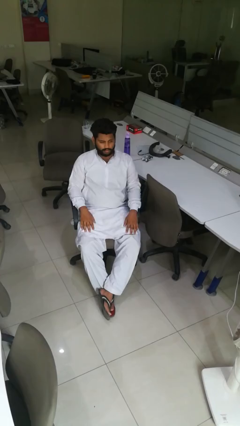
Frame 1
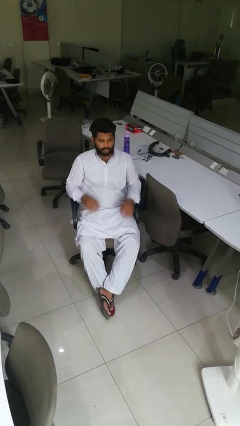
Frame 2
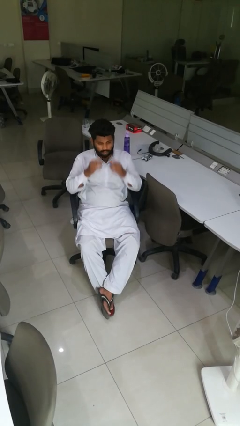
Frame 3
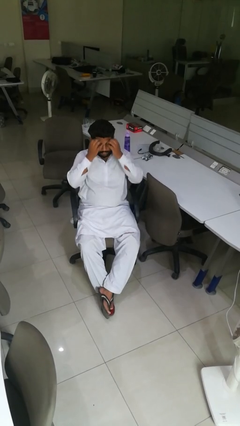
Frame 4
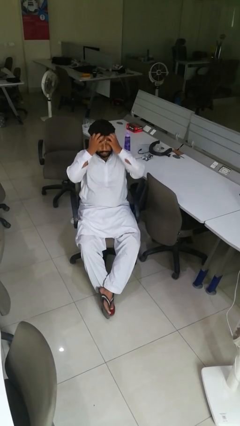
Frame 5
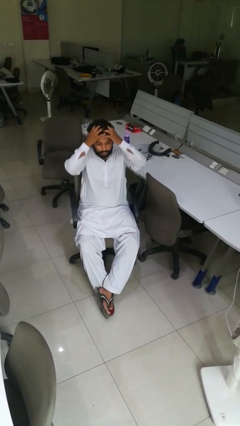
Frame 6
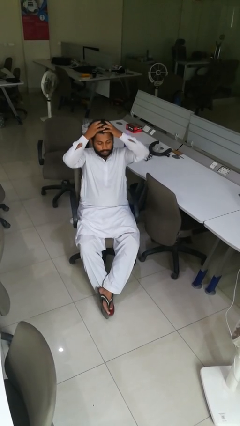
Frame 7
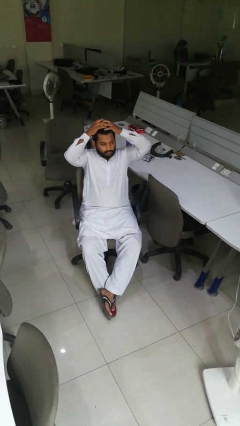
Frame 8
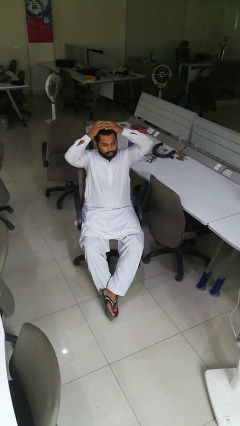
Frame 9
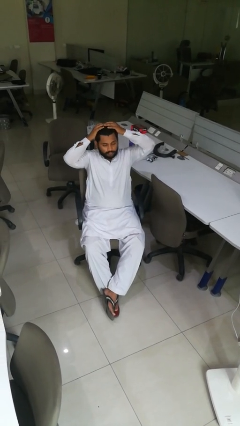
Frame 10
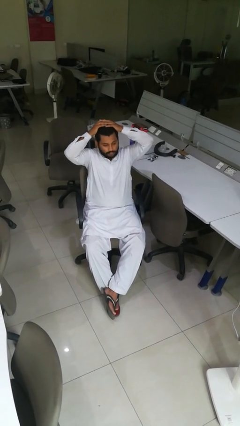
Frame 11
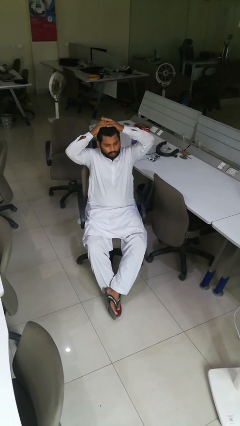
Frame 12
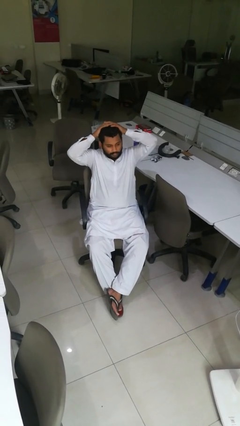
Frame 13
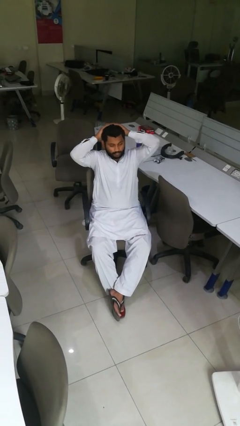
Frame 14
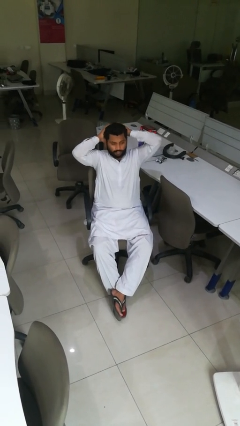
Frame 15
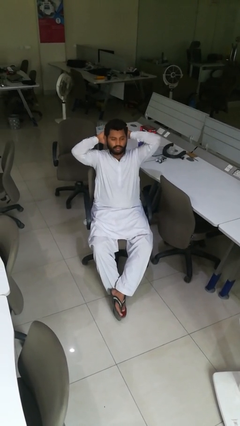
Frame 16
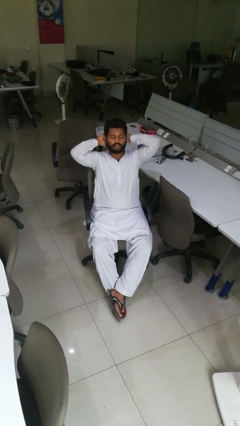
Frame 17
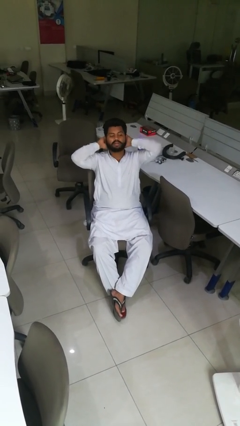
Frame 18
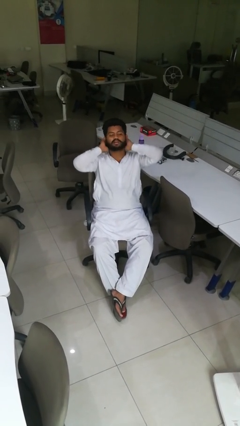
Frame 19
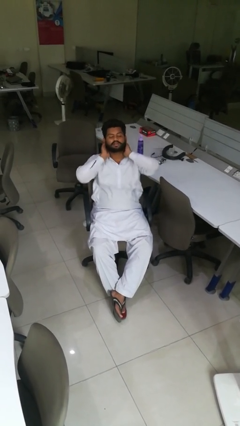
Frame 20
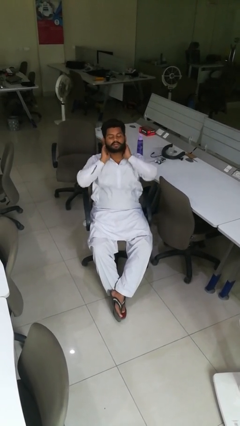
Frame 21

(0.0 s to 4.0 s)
person strokes hair

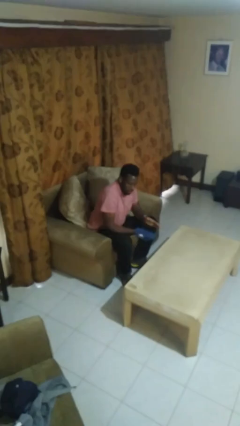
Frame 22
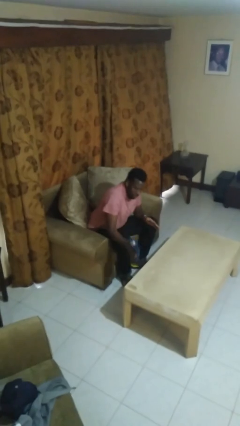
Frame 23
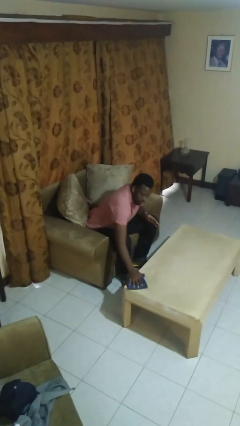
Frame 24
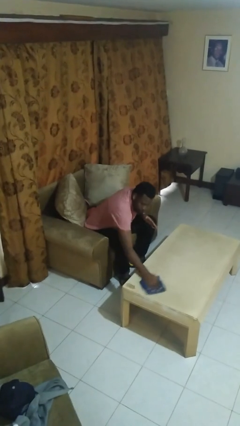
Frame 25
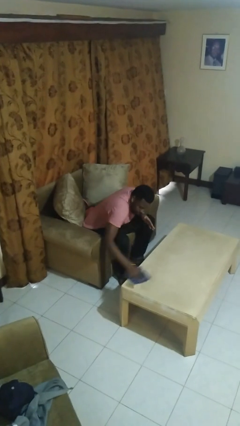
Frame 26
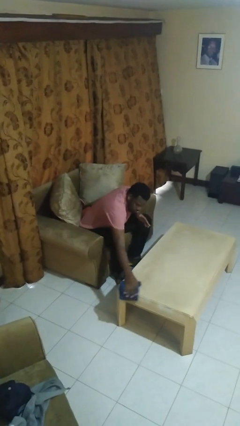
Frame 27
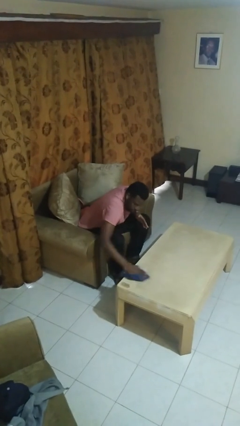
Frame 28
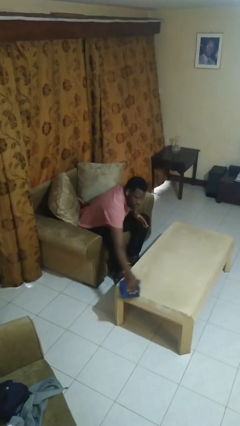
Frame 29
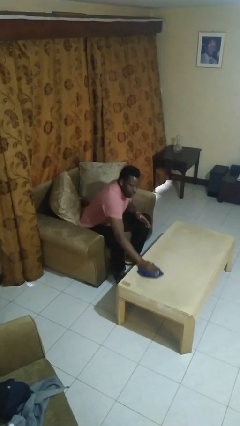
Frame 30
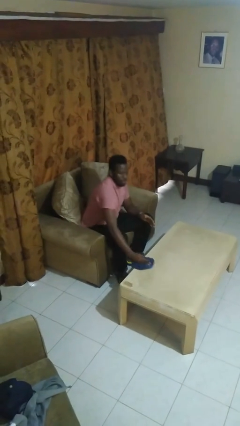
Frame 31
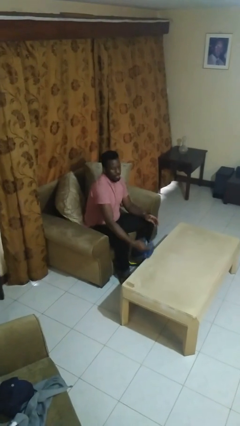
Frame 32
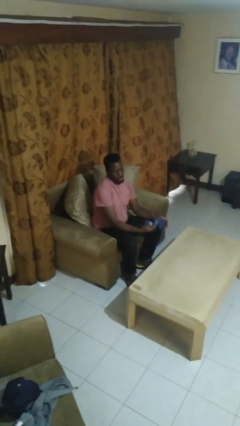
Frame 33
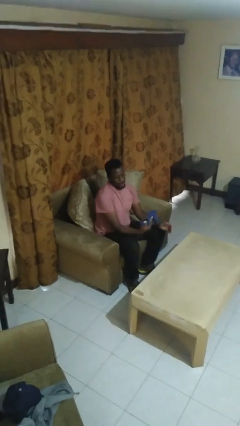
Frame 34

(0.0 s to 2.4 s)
person cleans table with rag

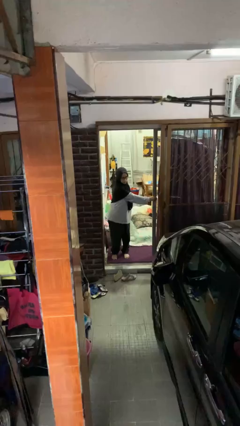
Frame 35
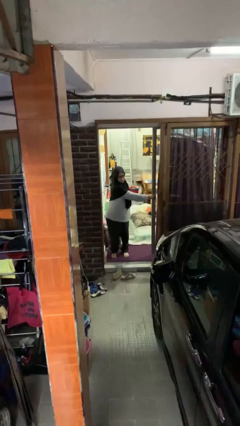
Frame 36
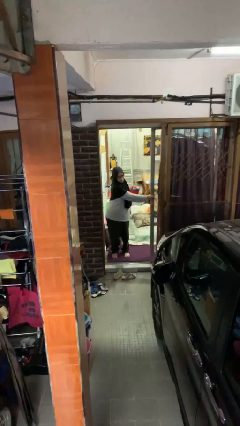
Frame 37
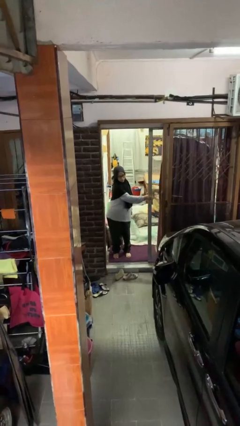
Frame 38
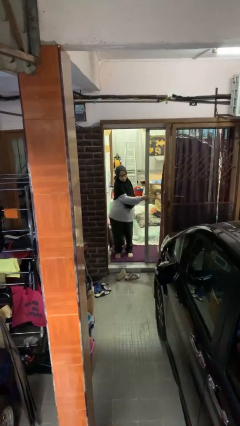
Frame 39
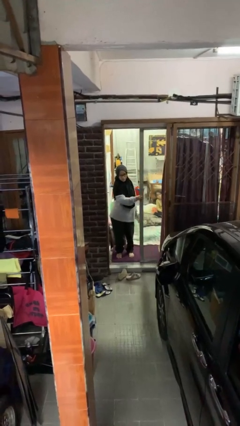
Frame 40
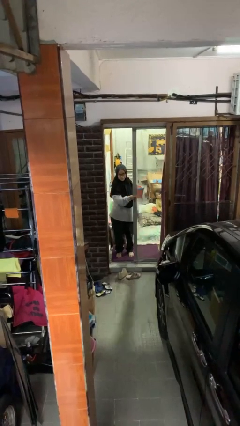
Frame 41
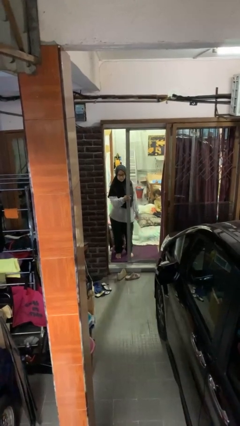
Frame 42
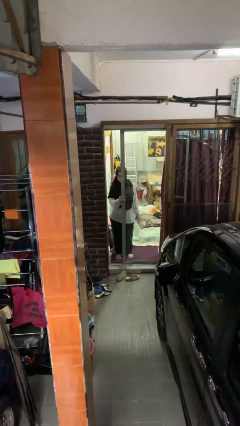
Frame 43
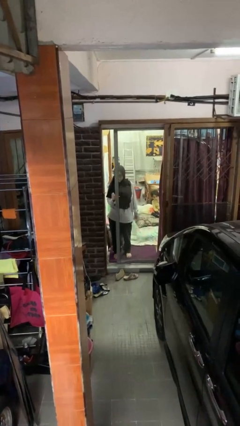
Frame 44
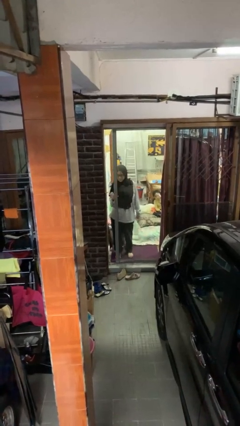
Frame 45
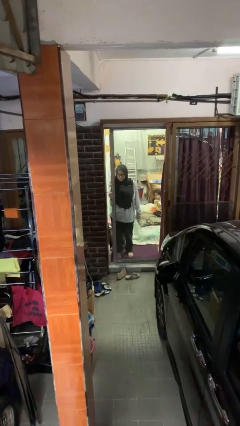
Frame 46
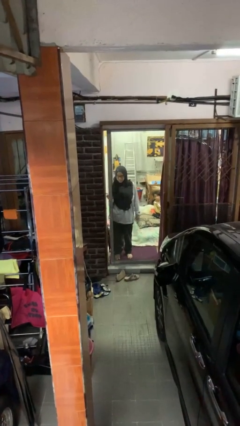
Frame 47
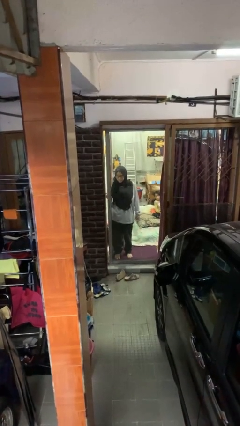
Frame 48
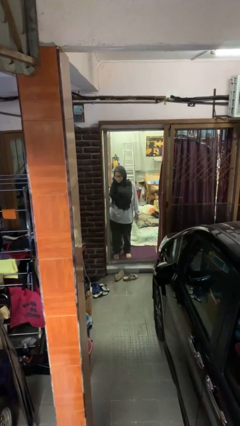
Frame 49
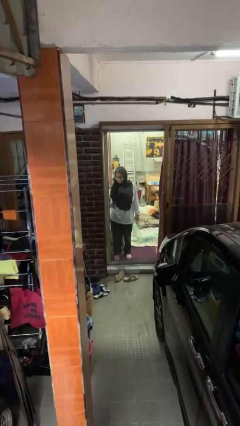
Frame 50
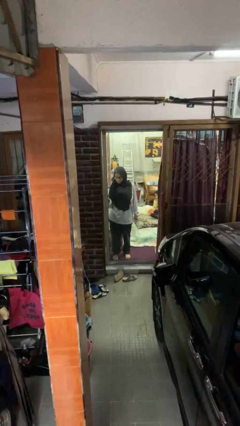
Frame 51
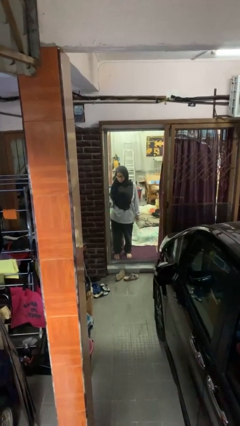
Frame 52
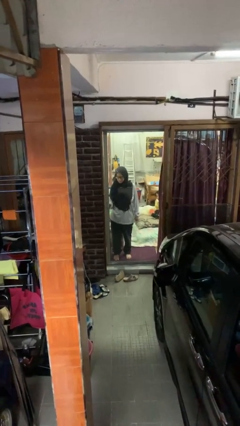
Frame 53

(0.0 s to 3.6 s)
person closes sliding door

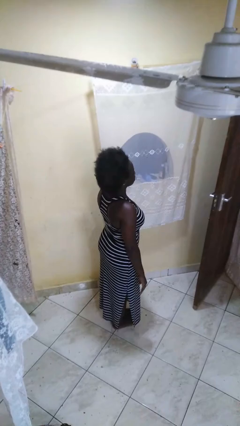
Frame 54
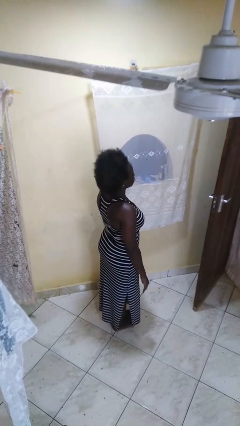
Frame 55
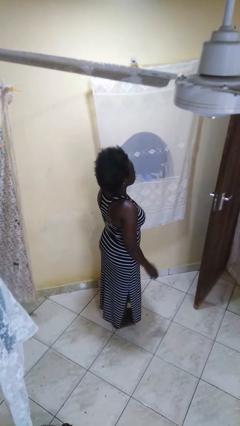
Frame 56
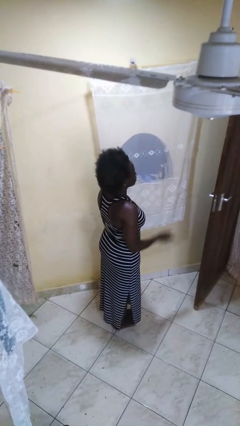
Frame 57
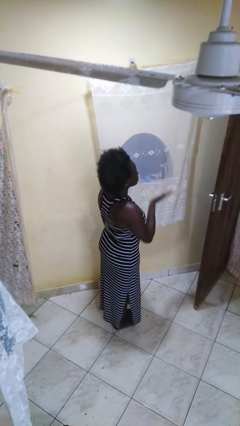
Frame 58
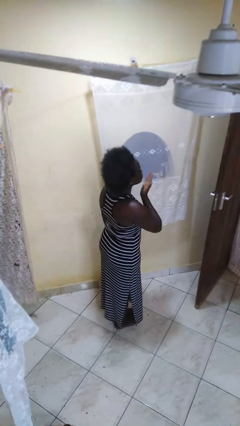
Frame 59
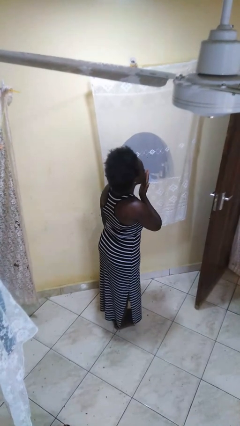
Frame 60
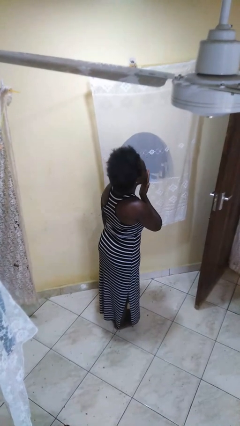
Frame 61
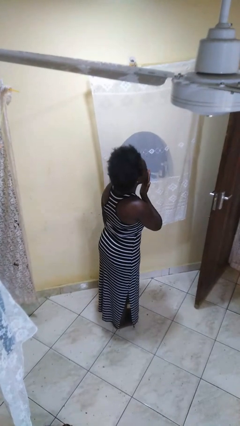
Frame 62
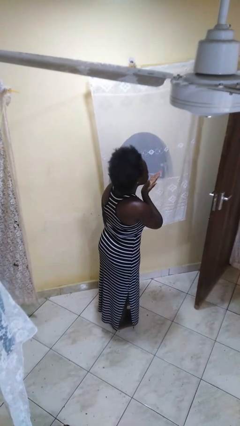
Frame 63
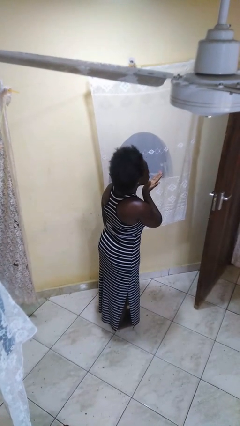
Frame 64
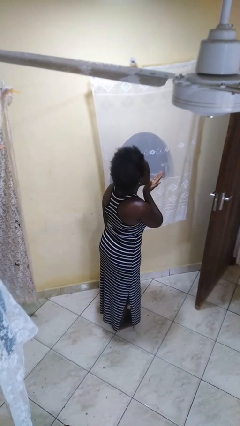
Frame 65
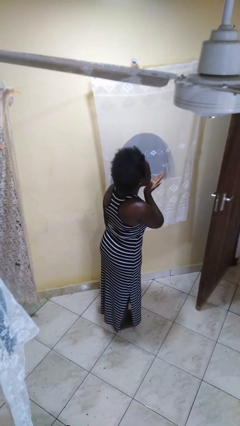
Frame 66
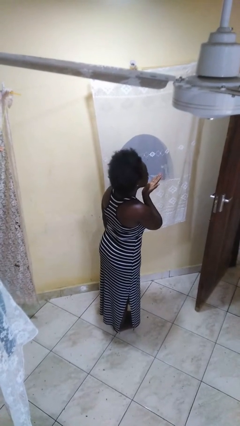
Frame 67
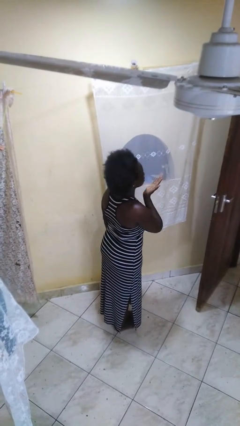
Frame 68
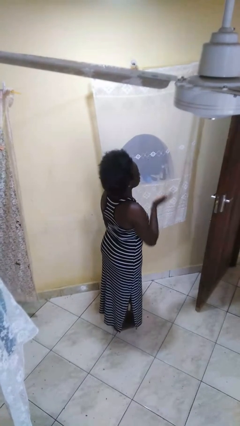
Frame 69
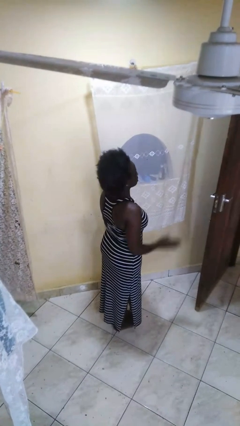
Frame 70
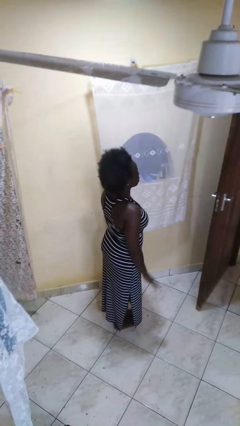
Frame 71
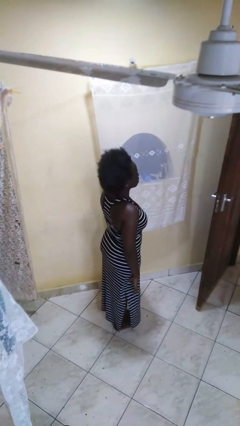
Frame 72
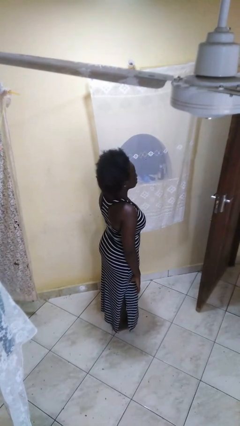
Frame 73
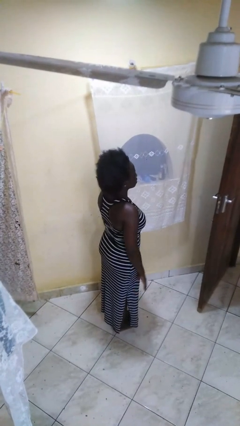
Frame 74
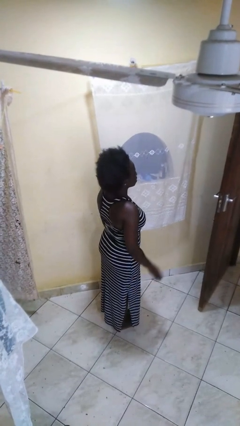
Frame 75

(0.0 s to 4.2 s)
person gestures blow kiss

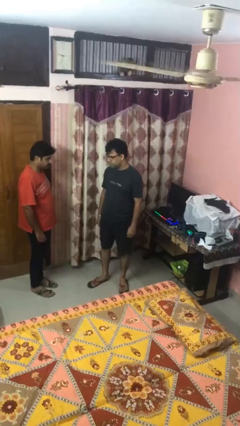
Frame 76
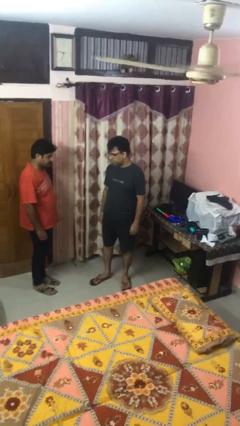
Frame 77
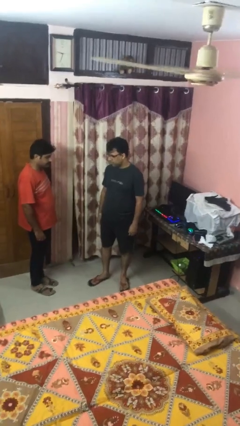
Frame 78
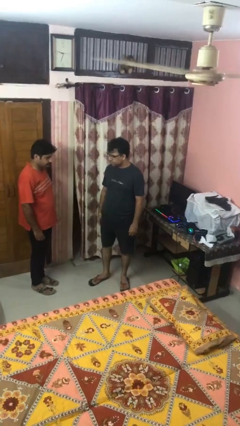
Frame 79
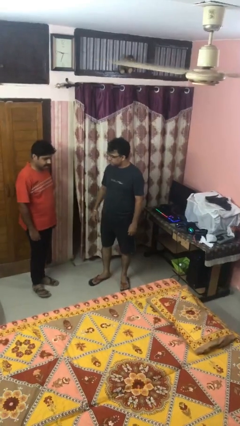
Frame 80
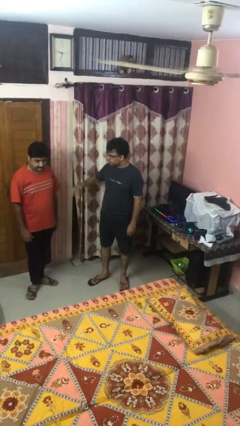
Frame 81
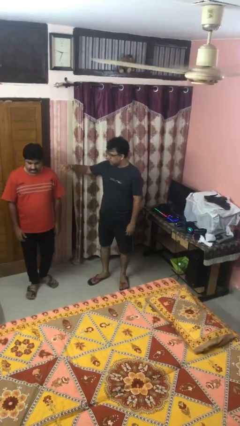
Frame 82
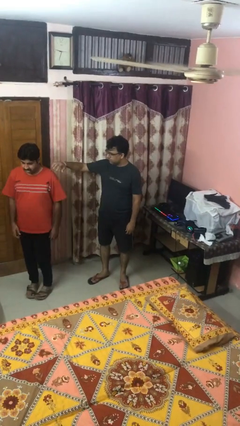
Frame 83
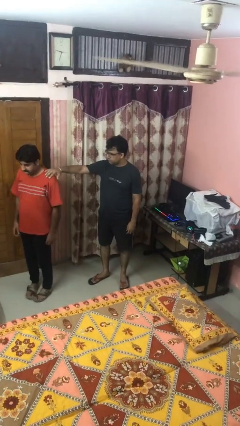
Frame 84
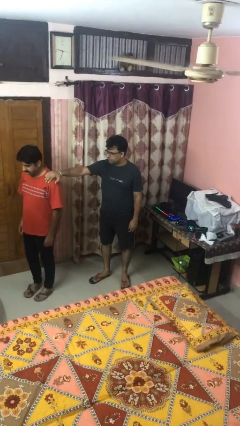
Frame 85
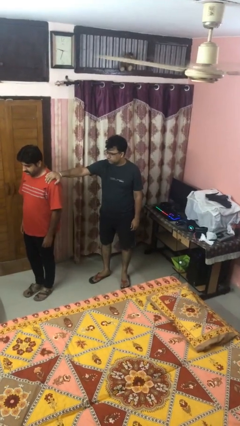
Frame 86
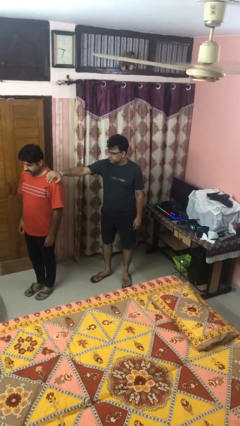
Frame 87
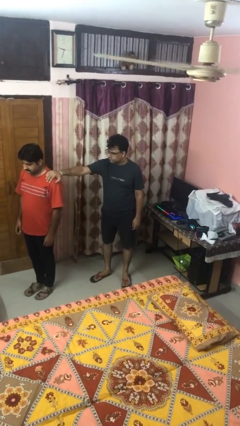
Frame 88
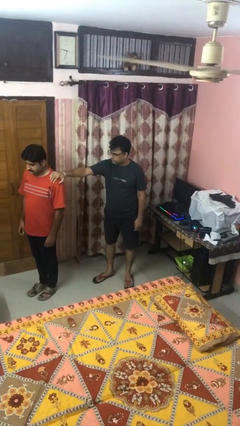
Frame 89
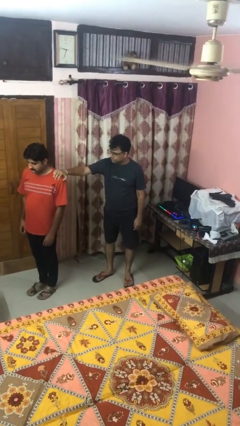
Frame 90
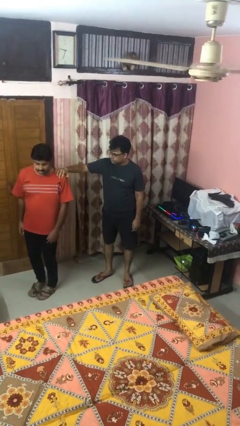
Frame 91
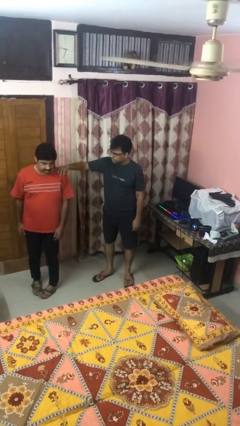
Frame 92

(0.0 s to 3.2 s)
person grabs person by shoulder

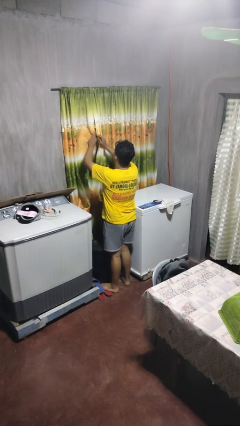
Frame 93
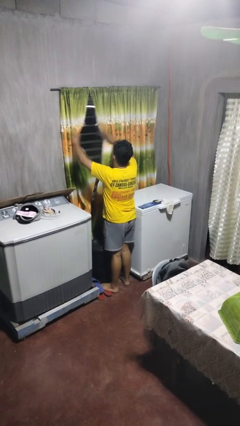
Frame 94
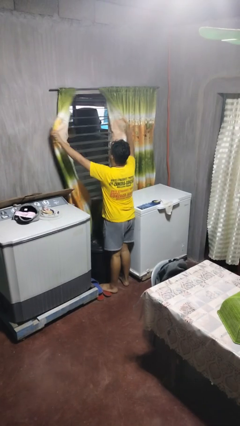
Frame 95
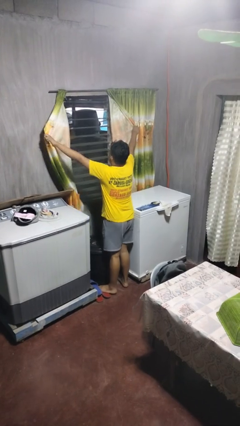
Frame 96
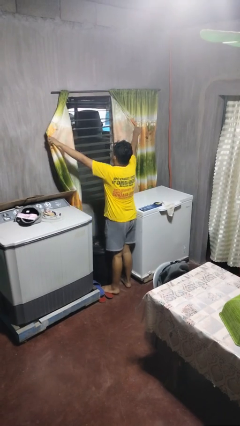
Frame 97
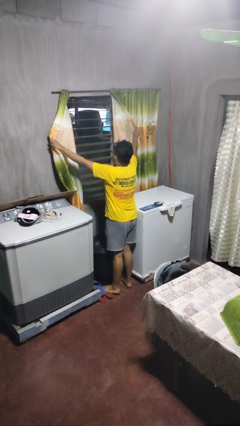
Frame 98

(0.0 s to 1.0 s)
person opens curtains
